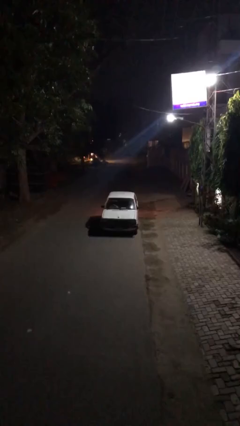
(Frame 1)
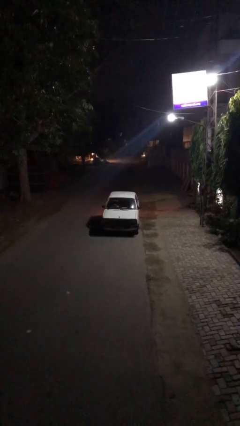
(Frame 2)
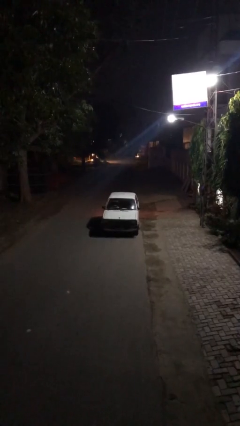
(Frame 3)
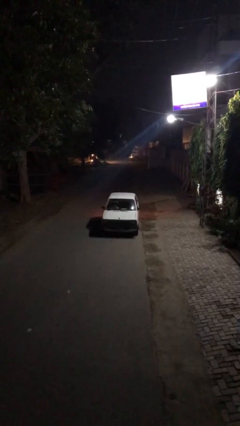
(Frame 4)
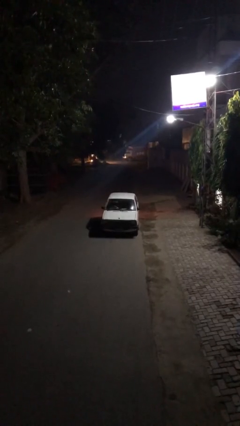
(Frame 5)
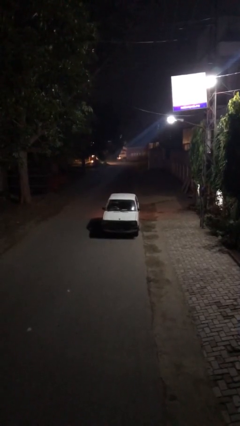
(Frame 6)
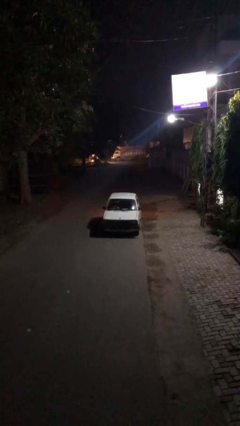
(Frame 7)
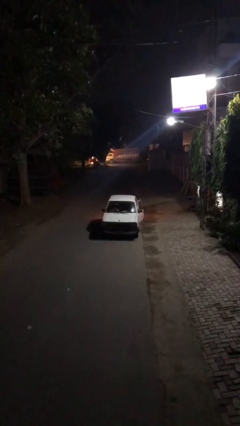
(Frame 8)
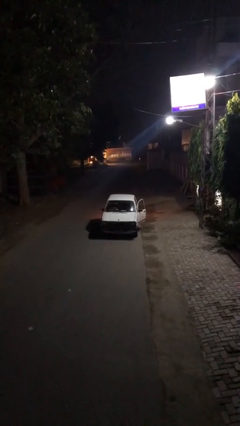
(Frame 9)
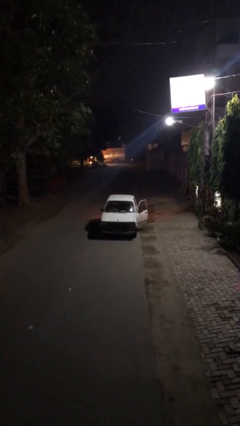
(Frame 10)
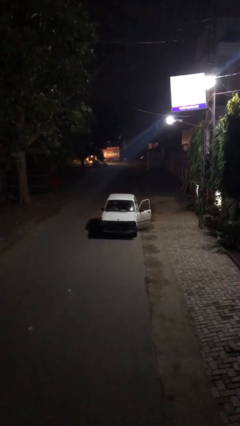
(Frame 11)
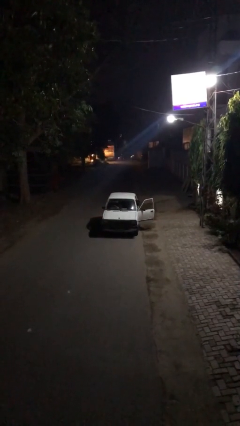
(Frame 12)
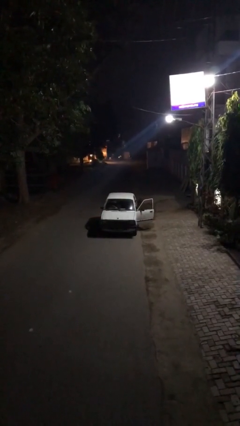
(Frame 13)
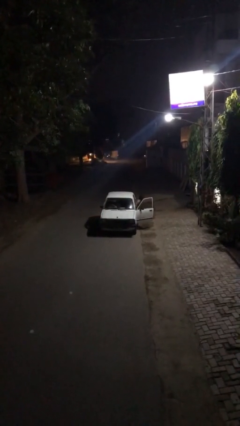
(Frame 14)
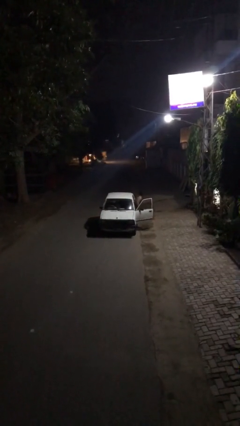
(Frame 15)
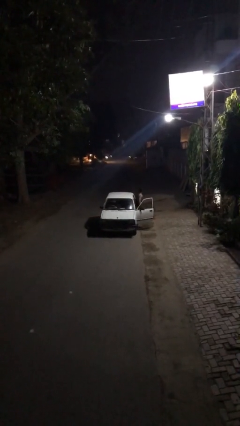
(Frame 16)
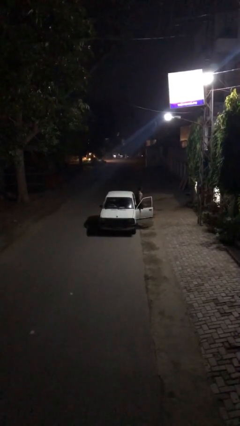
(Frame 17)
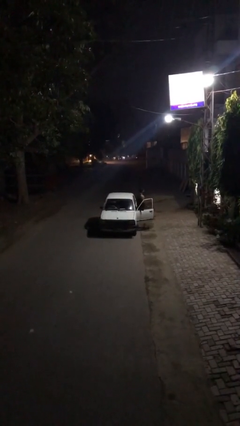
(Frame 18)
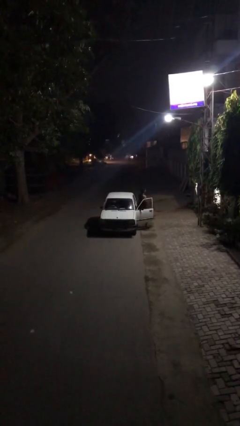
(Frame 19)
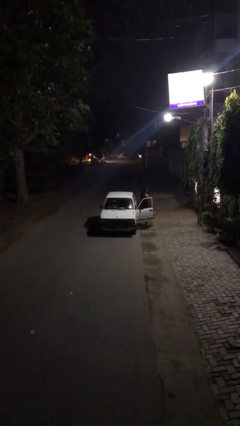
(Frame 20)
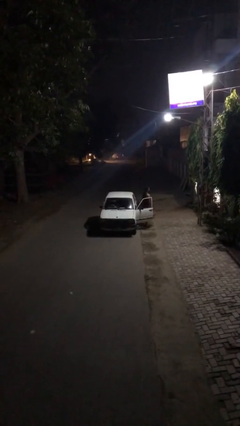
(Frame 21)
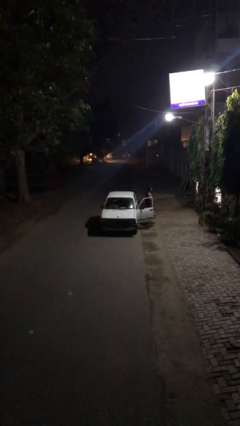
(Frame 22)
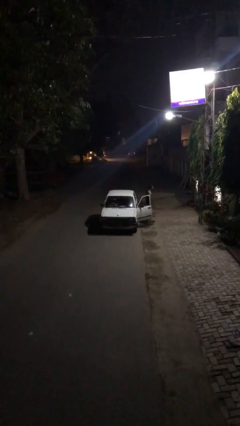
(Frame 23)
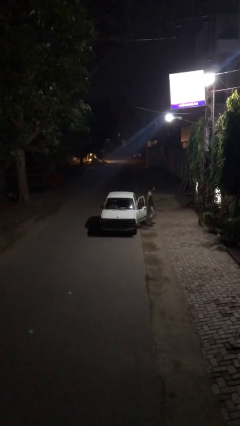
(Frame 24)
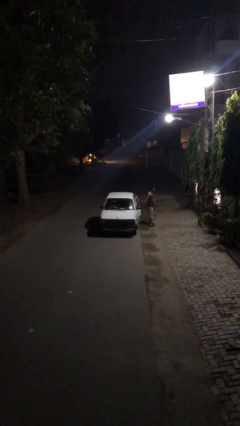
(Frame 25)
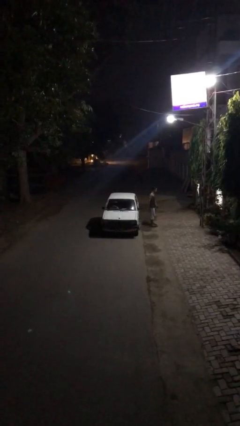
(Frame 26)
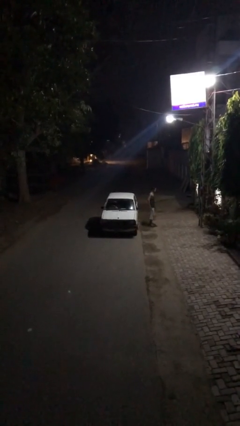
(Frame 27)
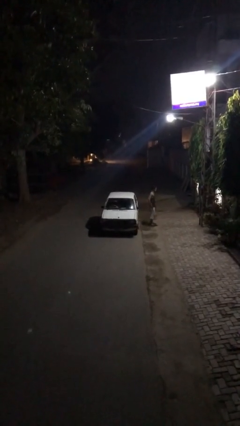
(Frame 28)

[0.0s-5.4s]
car drops off person

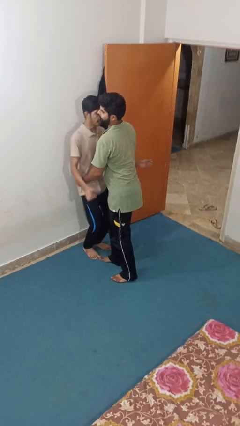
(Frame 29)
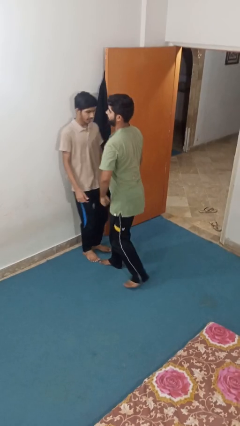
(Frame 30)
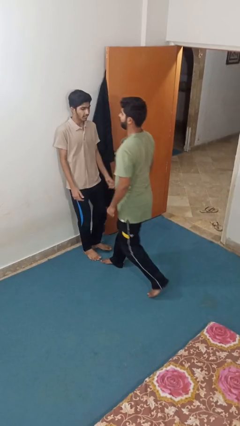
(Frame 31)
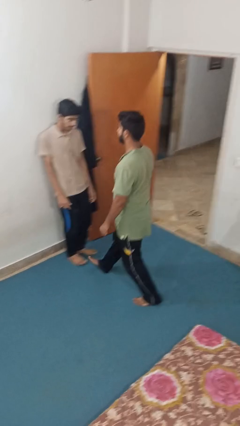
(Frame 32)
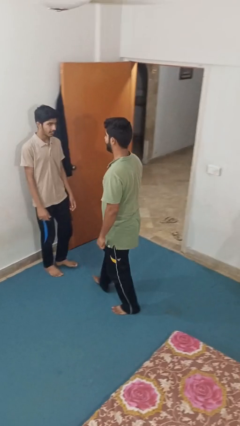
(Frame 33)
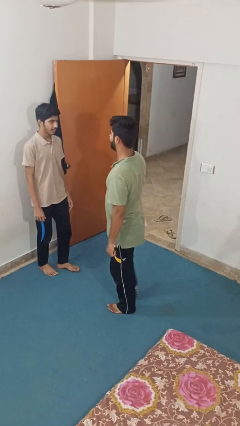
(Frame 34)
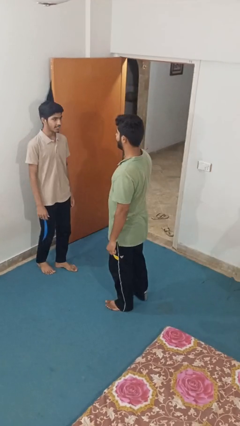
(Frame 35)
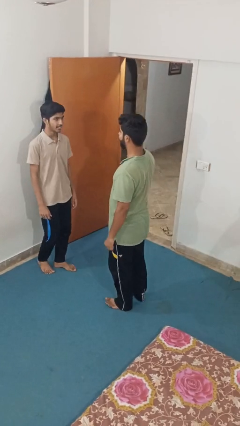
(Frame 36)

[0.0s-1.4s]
person puts down person

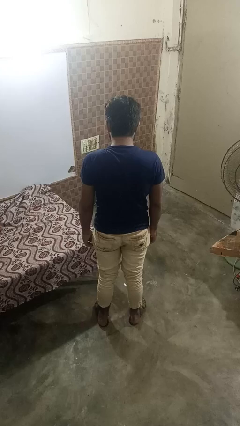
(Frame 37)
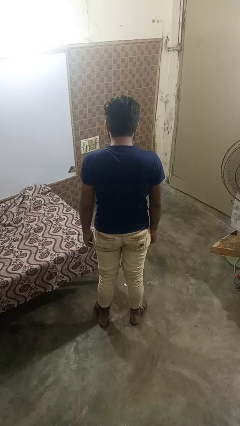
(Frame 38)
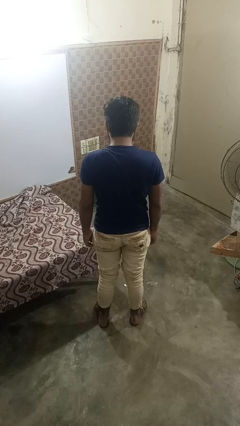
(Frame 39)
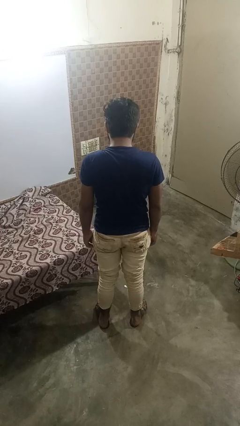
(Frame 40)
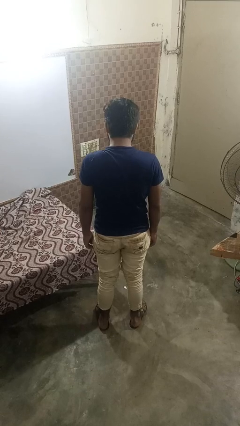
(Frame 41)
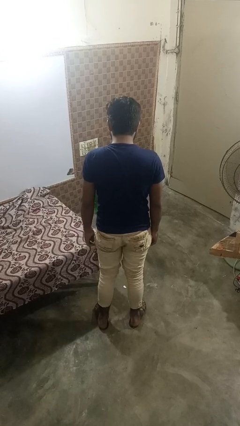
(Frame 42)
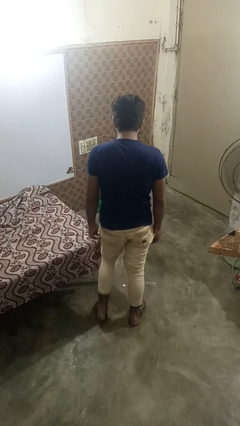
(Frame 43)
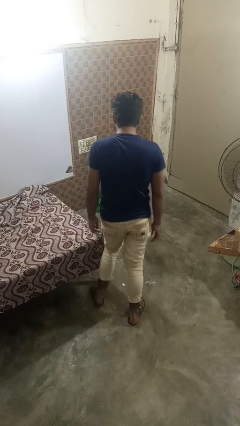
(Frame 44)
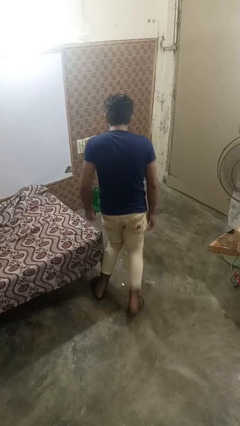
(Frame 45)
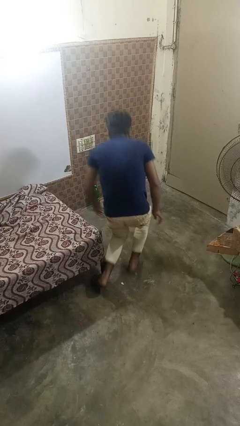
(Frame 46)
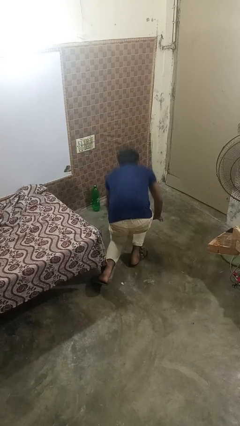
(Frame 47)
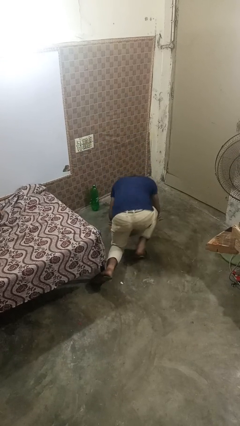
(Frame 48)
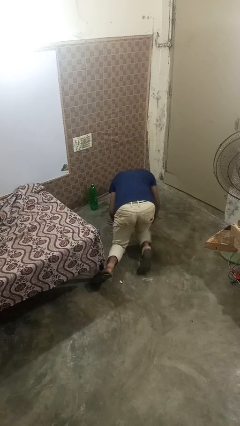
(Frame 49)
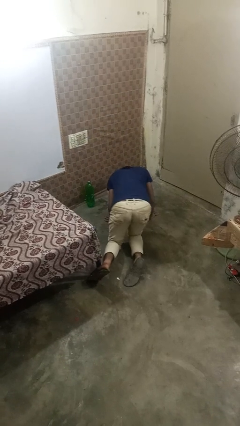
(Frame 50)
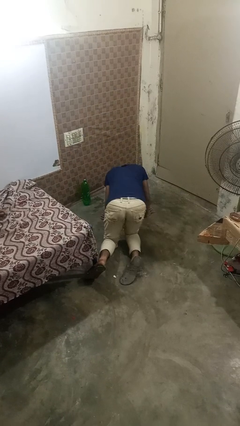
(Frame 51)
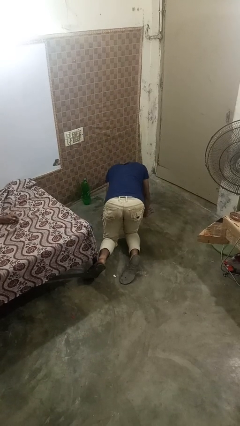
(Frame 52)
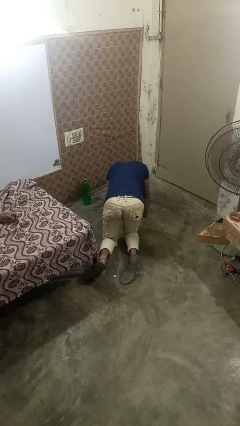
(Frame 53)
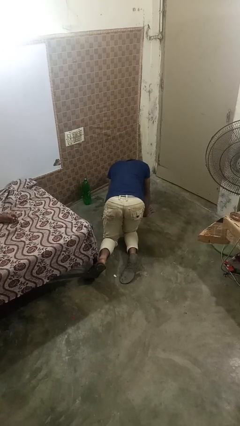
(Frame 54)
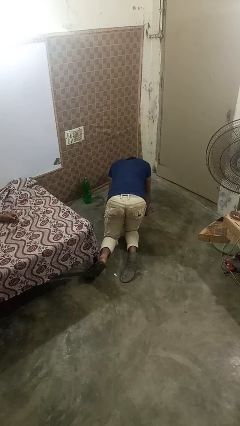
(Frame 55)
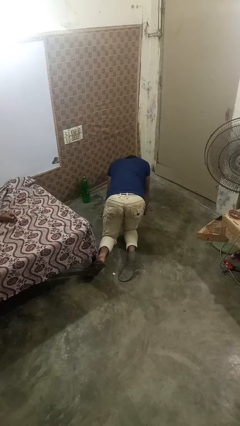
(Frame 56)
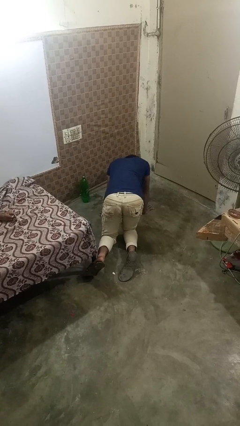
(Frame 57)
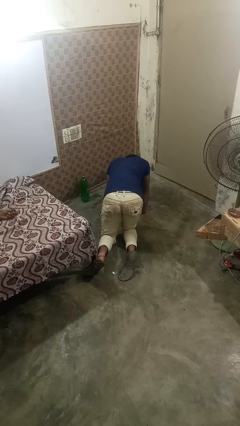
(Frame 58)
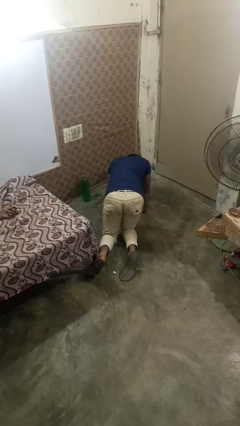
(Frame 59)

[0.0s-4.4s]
person trips on object on floor

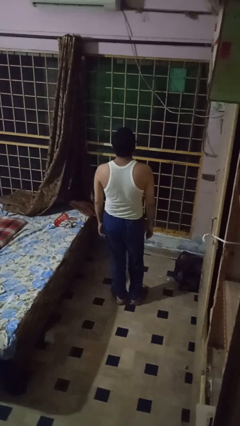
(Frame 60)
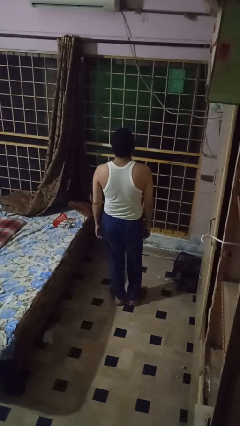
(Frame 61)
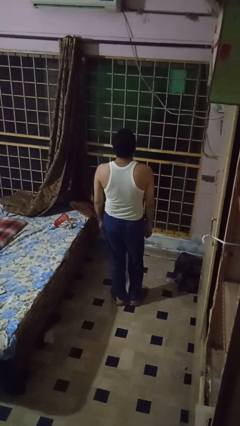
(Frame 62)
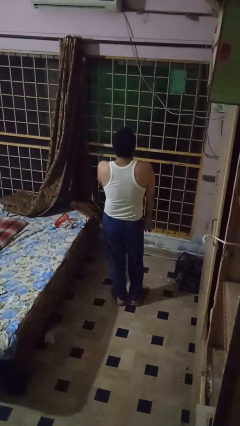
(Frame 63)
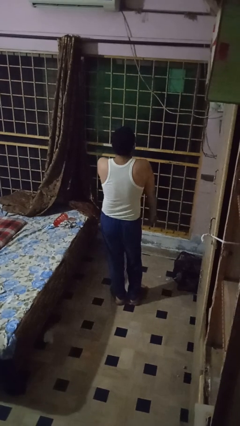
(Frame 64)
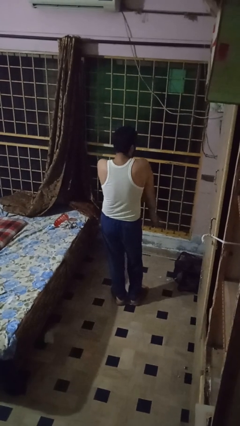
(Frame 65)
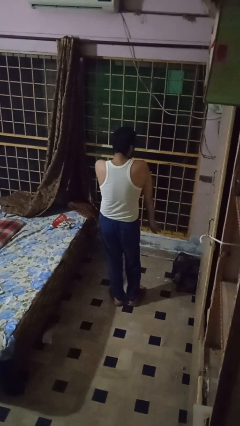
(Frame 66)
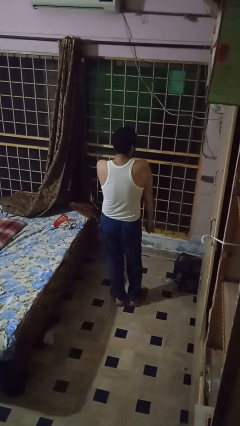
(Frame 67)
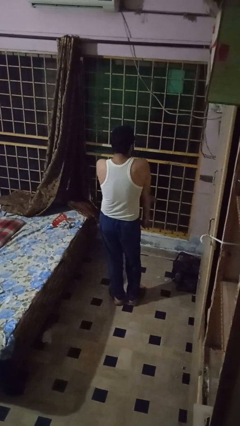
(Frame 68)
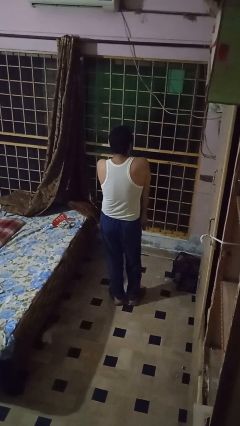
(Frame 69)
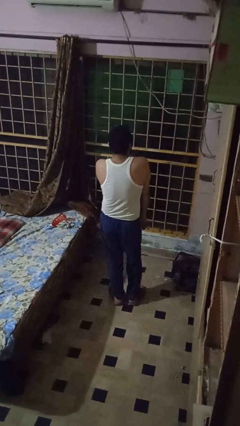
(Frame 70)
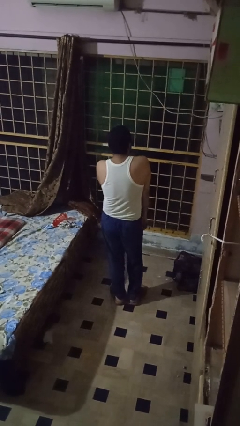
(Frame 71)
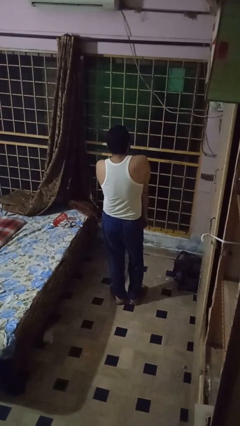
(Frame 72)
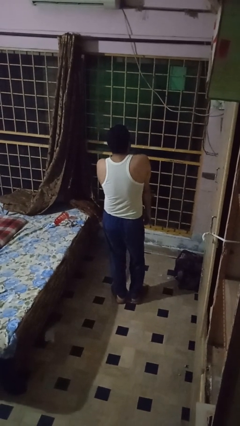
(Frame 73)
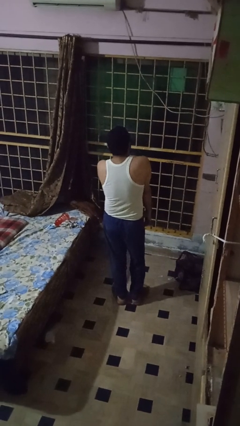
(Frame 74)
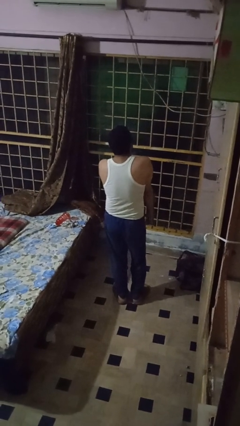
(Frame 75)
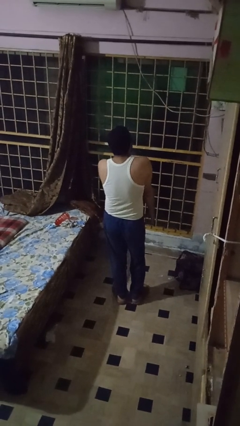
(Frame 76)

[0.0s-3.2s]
person swats bug

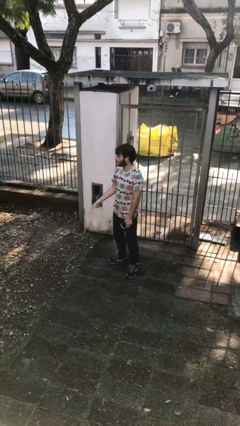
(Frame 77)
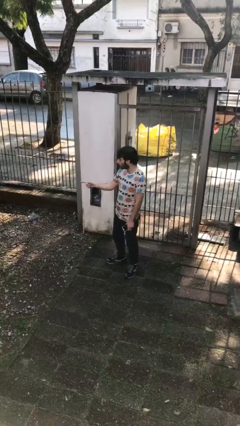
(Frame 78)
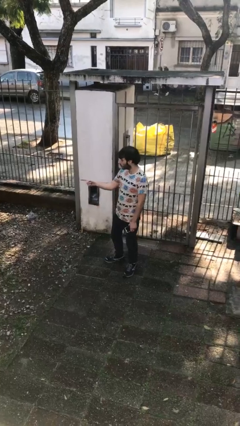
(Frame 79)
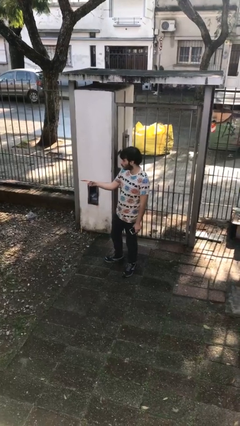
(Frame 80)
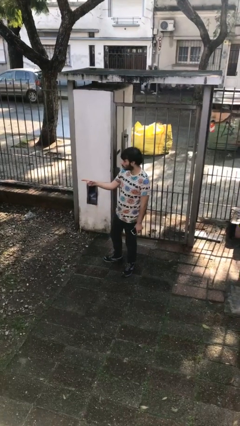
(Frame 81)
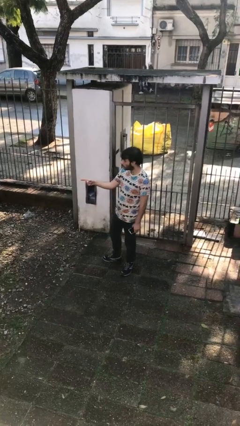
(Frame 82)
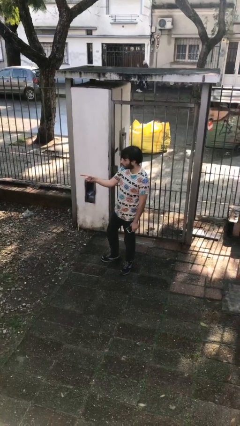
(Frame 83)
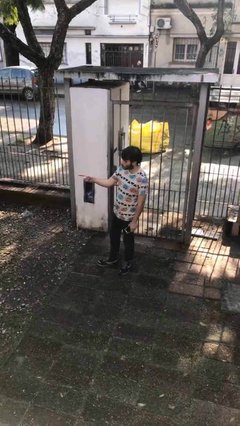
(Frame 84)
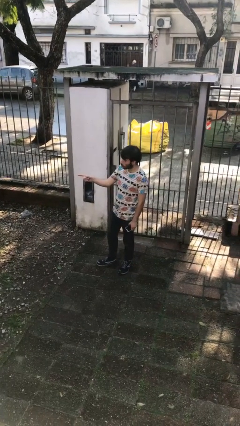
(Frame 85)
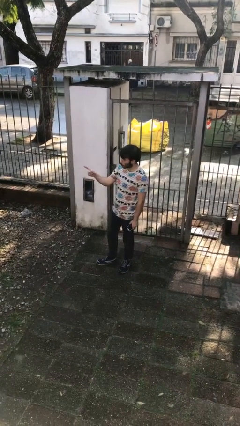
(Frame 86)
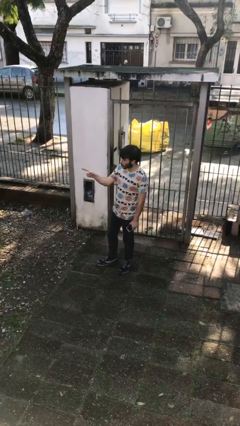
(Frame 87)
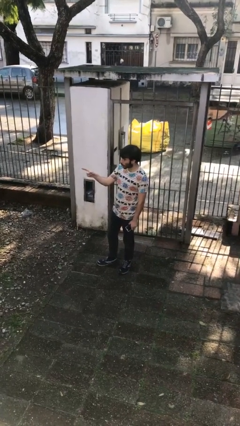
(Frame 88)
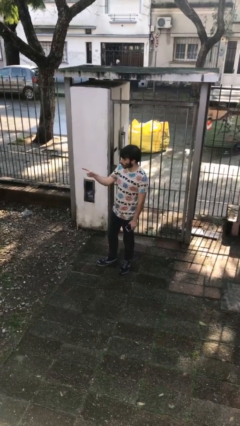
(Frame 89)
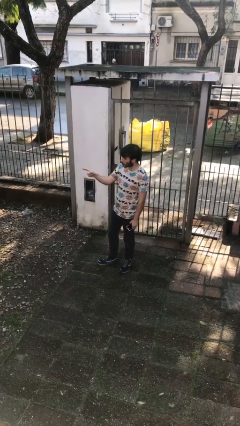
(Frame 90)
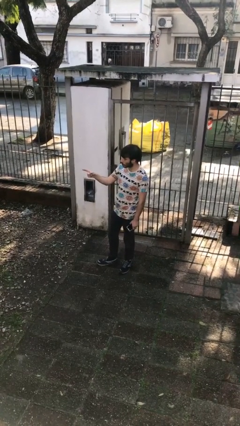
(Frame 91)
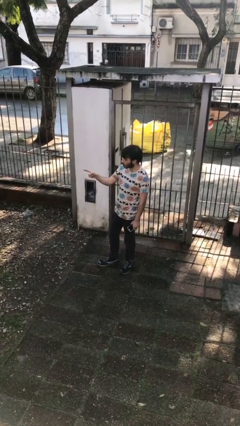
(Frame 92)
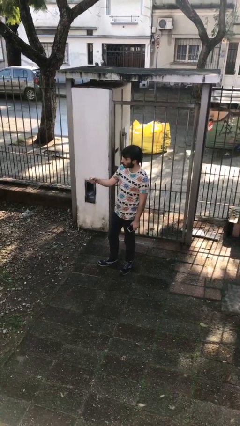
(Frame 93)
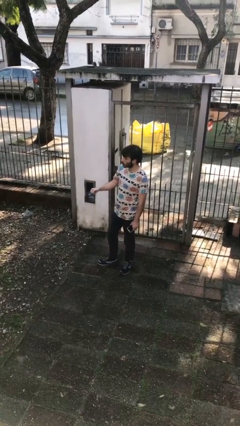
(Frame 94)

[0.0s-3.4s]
person points at person
